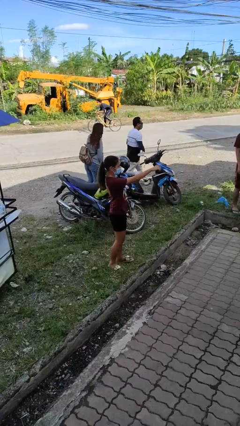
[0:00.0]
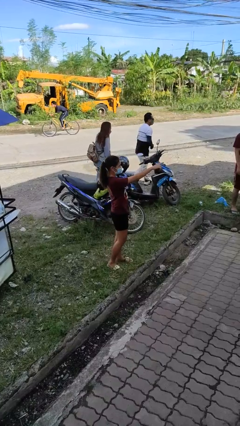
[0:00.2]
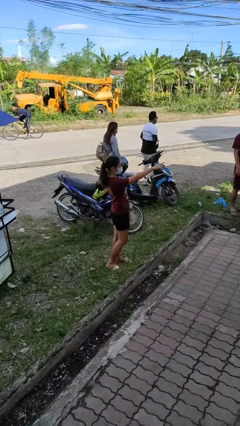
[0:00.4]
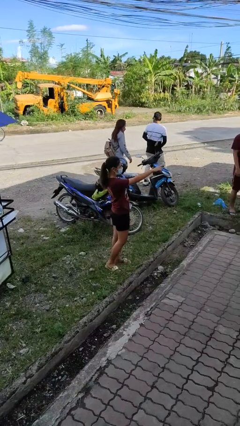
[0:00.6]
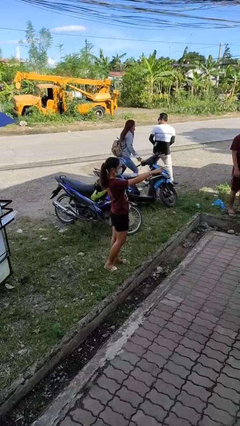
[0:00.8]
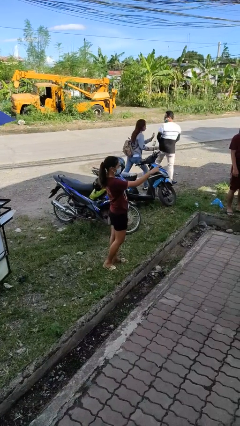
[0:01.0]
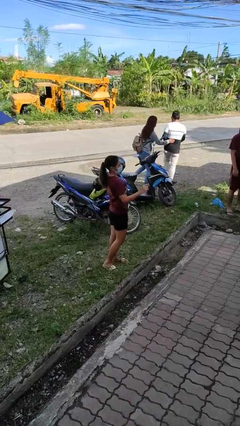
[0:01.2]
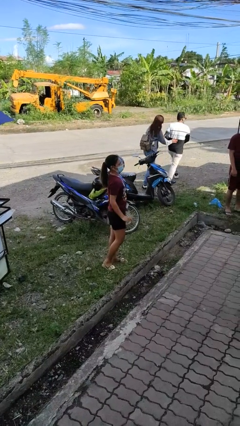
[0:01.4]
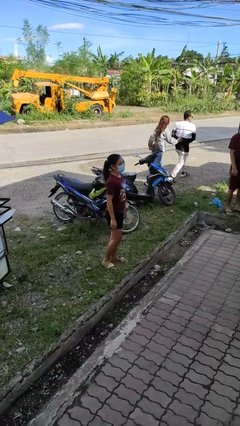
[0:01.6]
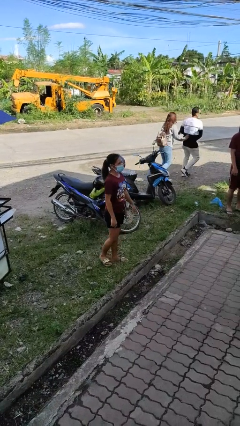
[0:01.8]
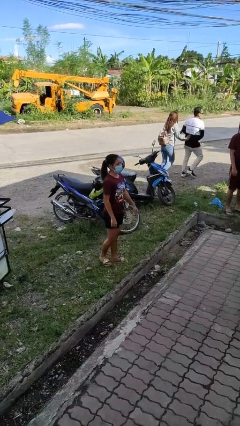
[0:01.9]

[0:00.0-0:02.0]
person points at person

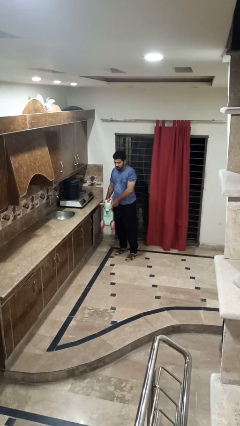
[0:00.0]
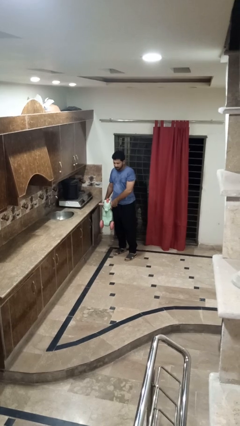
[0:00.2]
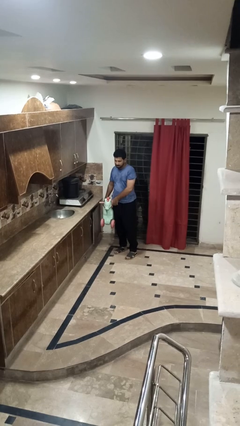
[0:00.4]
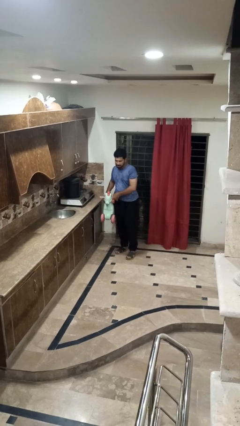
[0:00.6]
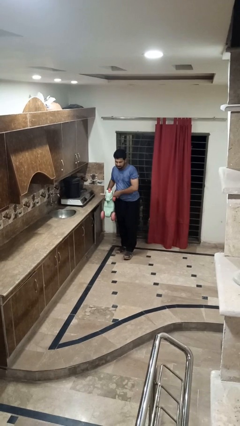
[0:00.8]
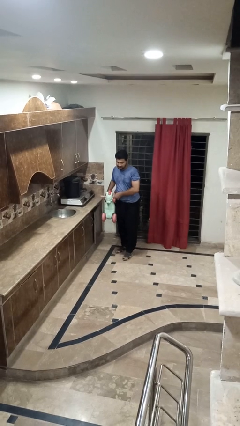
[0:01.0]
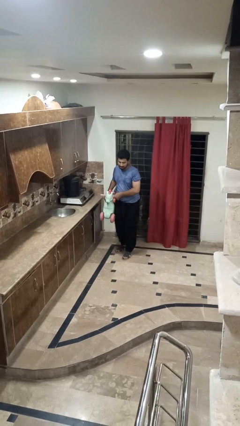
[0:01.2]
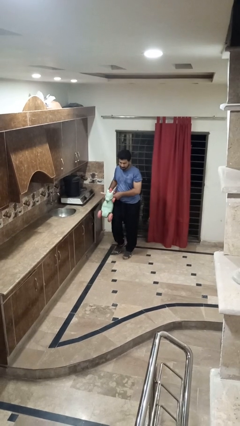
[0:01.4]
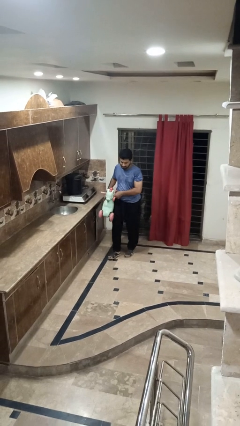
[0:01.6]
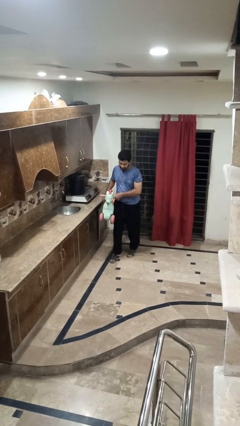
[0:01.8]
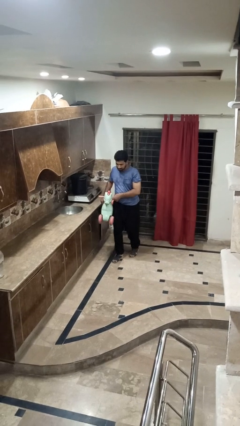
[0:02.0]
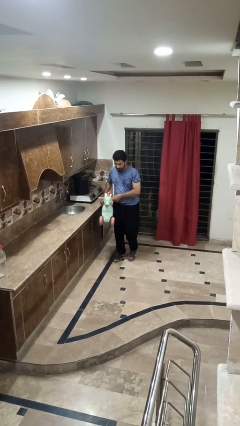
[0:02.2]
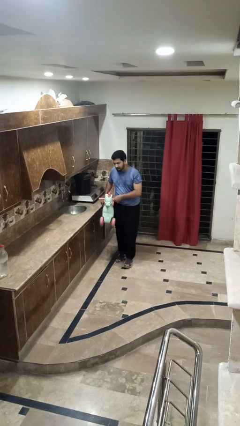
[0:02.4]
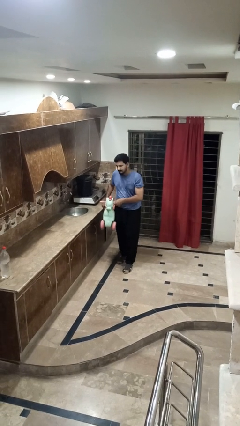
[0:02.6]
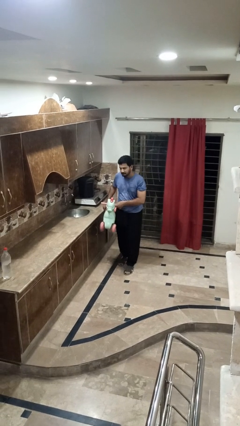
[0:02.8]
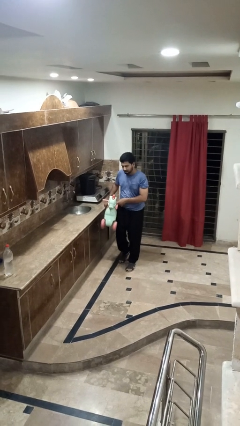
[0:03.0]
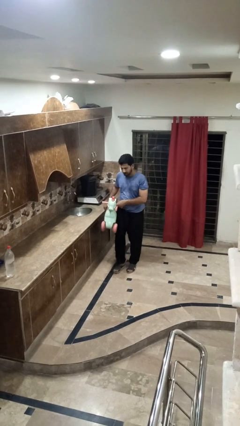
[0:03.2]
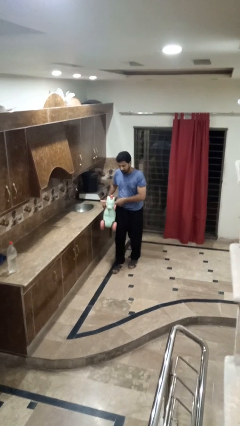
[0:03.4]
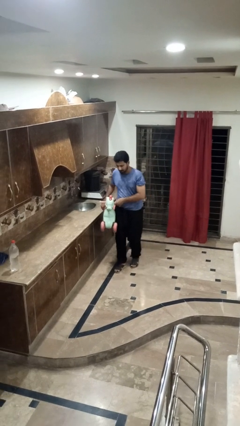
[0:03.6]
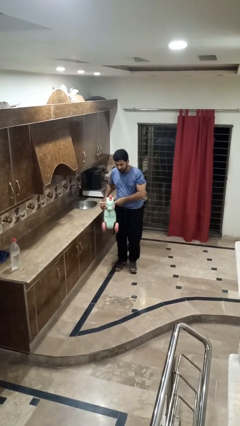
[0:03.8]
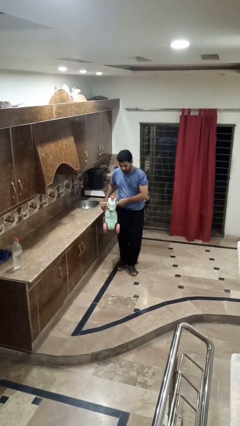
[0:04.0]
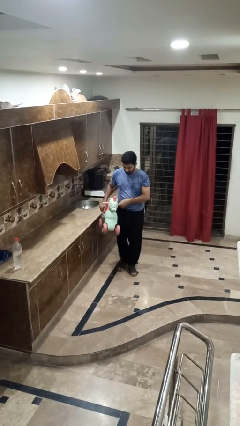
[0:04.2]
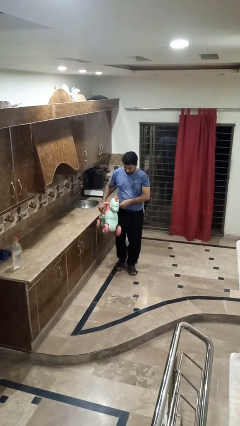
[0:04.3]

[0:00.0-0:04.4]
person carries bicycle

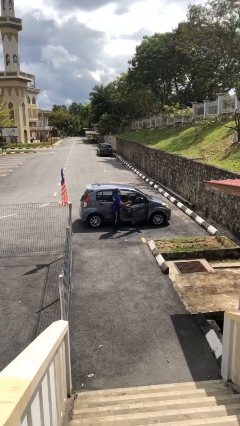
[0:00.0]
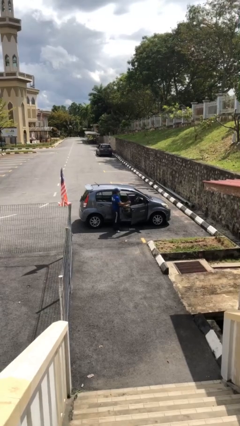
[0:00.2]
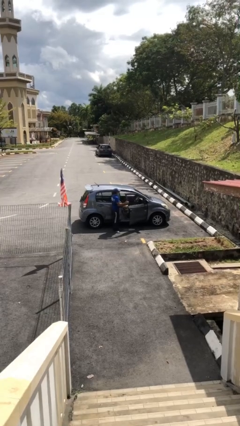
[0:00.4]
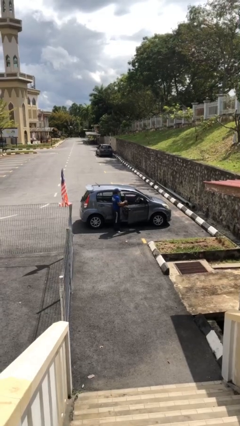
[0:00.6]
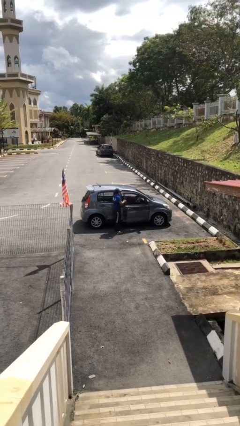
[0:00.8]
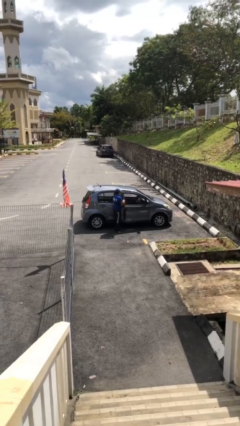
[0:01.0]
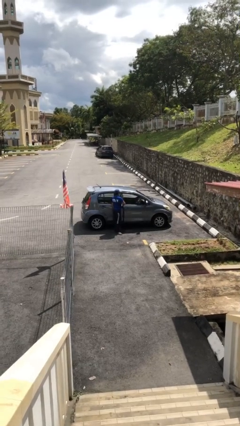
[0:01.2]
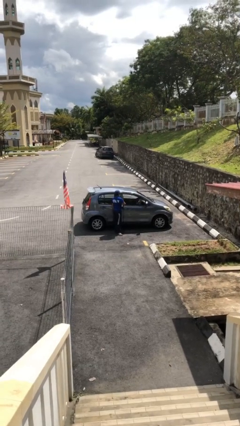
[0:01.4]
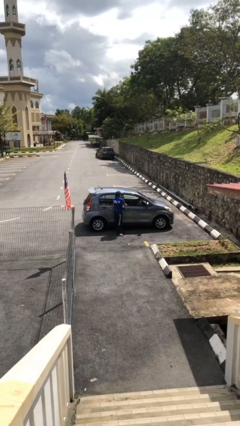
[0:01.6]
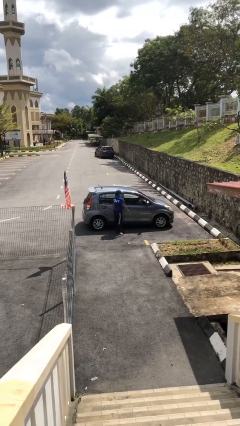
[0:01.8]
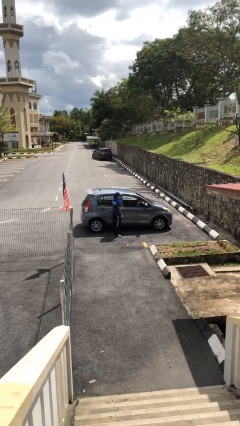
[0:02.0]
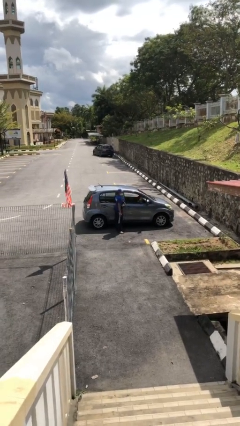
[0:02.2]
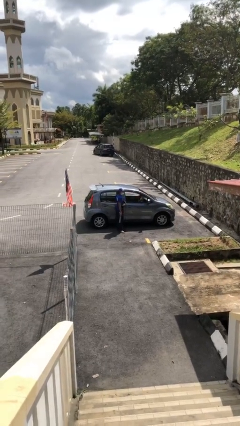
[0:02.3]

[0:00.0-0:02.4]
person closes car door

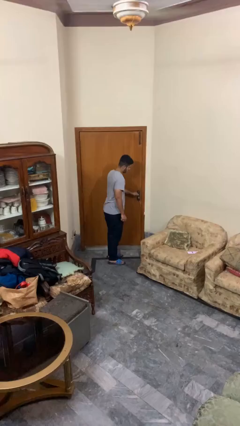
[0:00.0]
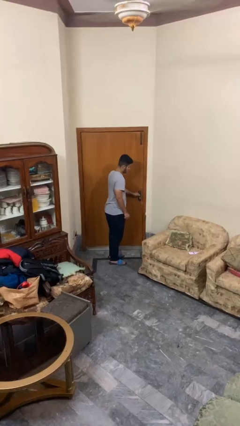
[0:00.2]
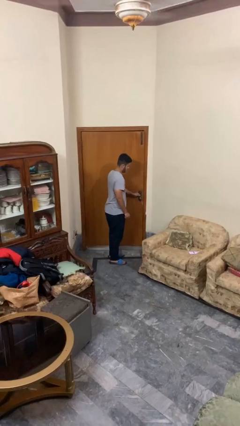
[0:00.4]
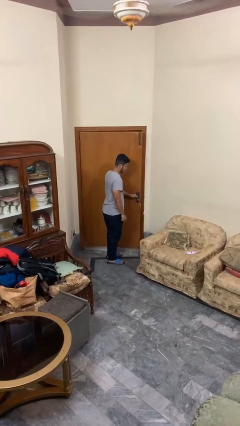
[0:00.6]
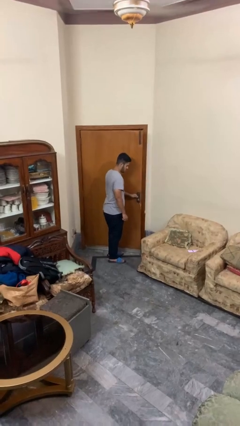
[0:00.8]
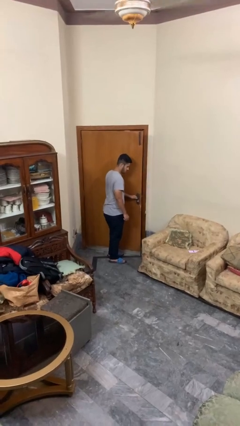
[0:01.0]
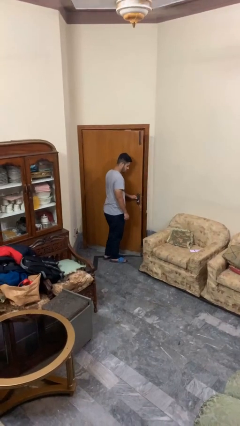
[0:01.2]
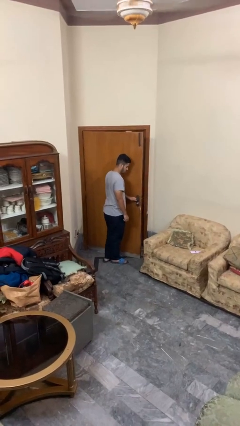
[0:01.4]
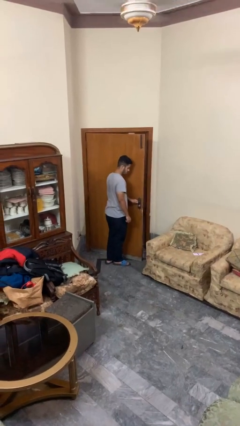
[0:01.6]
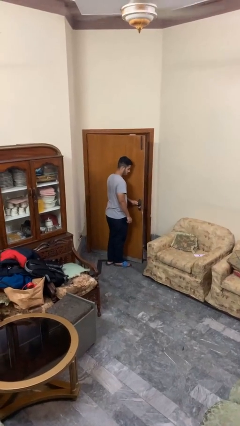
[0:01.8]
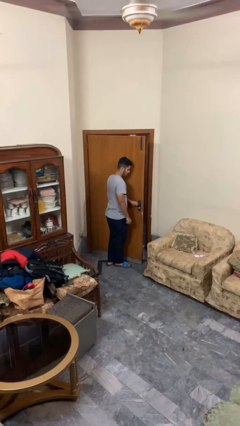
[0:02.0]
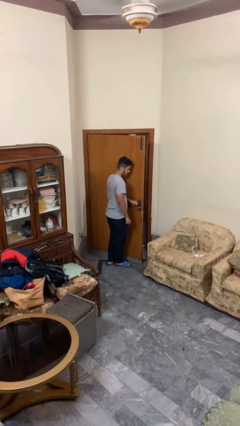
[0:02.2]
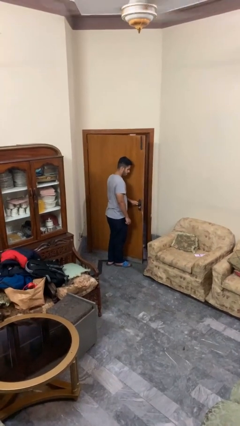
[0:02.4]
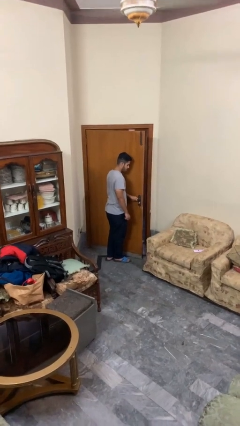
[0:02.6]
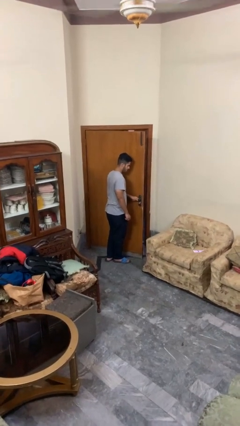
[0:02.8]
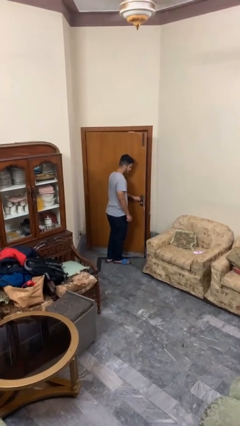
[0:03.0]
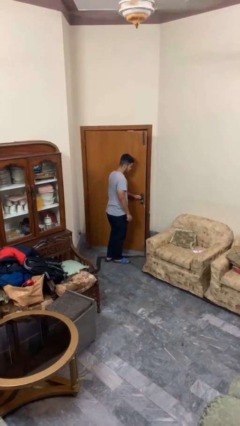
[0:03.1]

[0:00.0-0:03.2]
person opens facility door

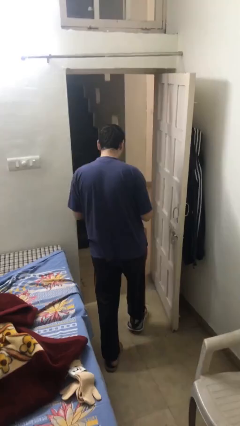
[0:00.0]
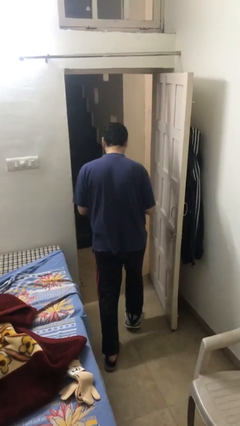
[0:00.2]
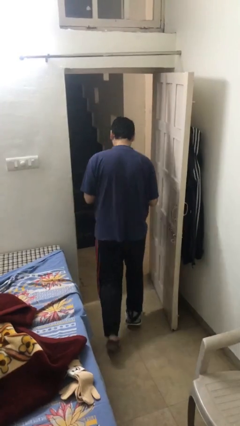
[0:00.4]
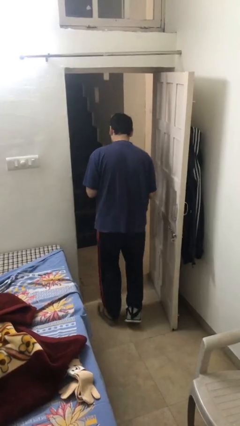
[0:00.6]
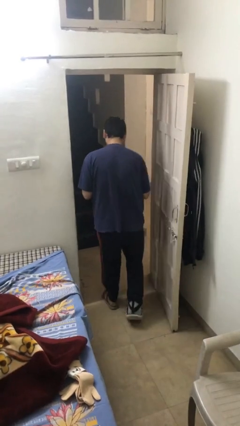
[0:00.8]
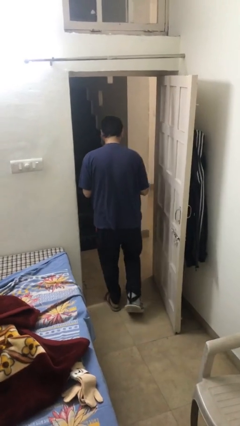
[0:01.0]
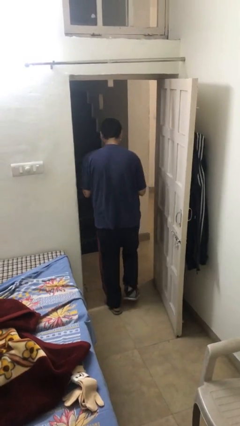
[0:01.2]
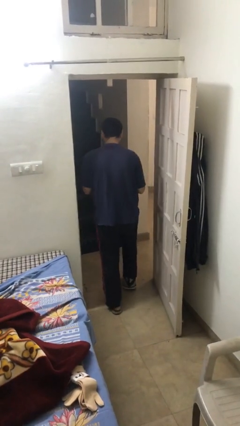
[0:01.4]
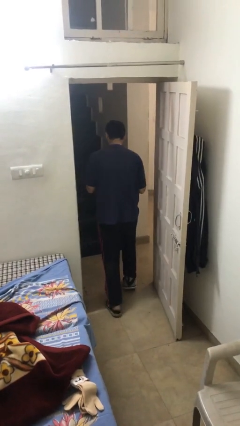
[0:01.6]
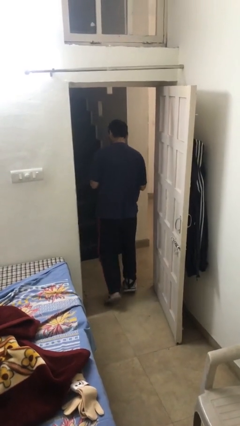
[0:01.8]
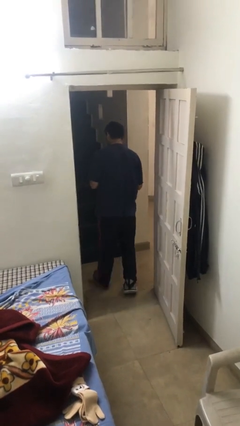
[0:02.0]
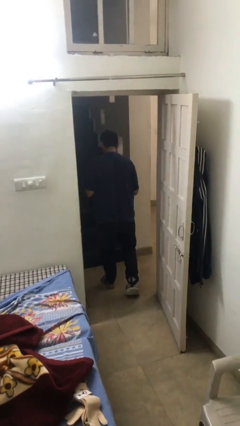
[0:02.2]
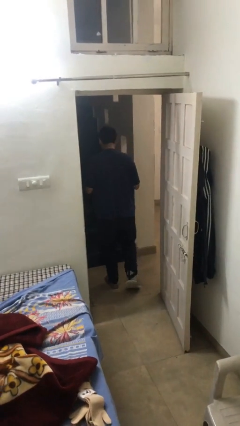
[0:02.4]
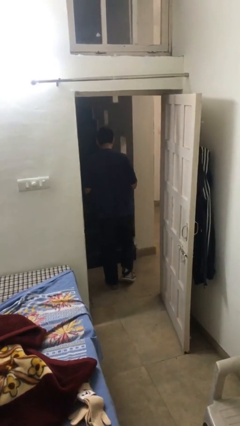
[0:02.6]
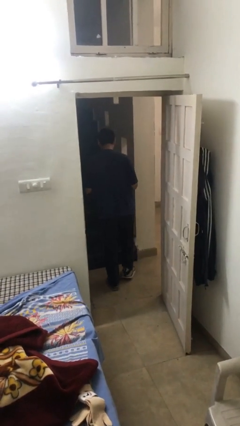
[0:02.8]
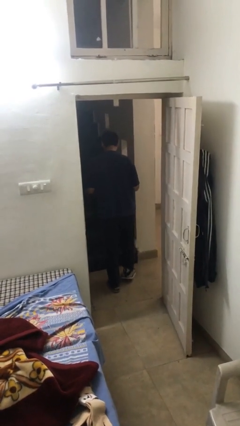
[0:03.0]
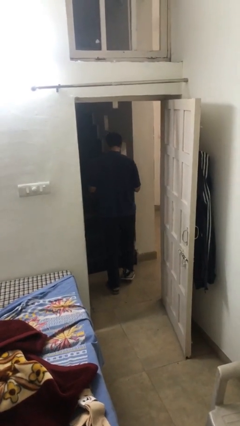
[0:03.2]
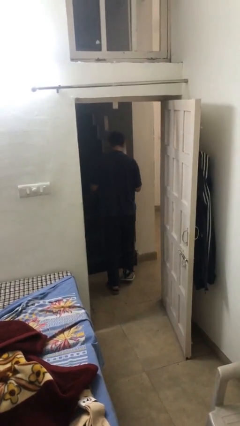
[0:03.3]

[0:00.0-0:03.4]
person exits scene through structure

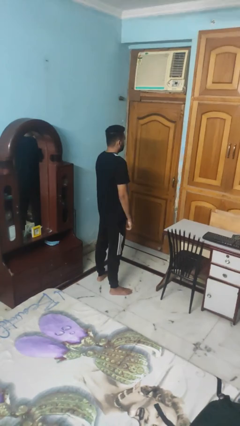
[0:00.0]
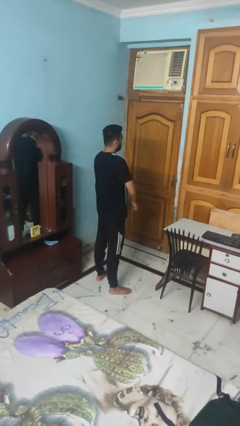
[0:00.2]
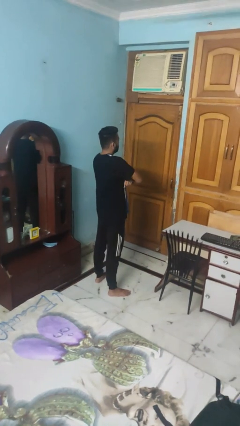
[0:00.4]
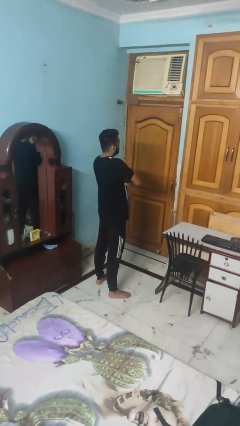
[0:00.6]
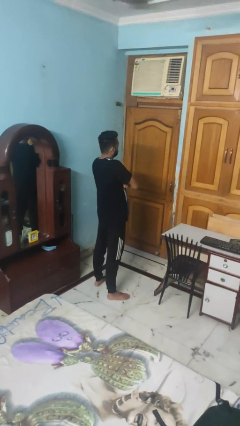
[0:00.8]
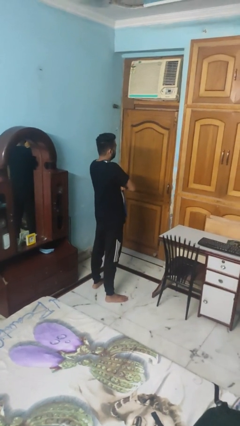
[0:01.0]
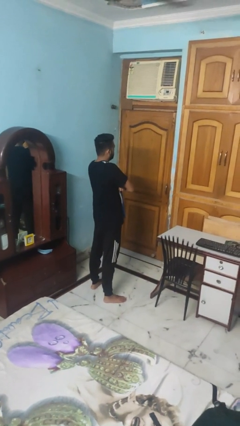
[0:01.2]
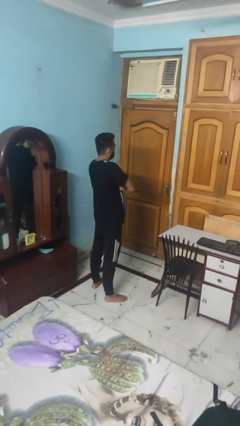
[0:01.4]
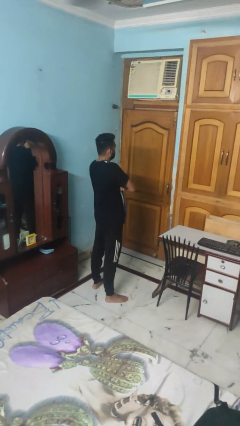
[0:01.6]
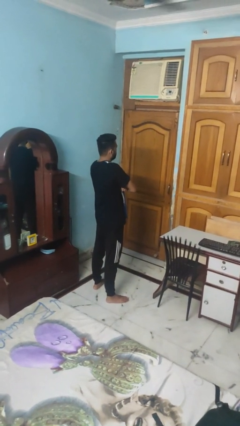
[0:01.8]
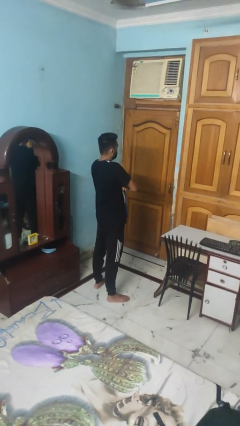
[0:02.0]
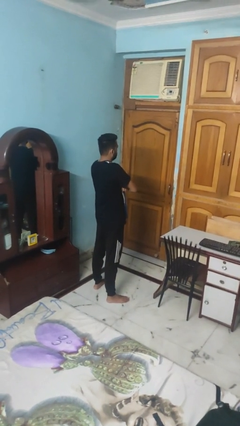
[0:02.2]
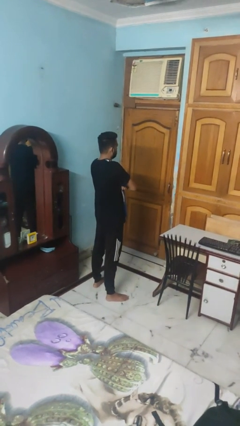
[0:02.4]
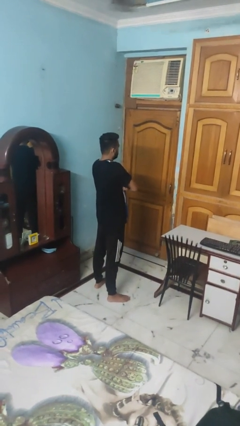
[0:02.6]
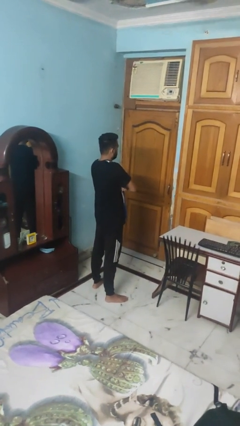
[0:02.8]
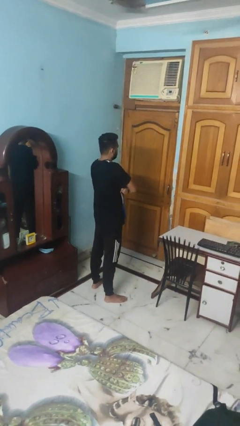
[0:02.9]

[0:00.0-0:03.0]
person crosses arms
